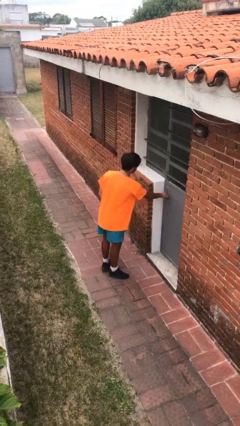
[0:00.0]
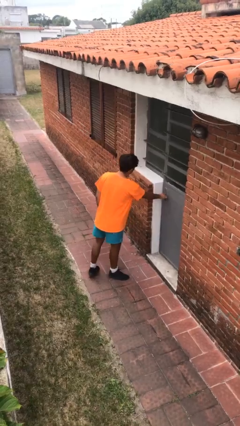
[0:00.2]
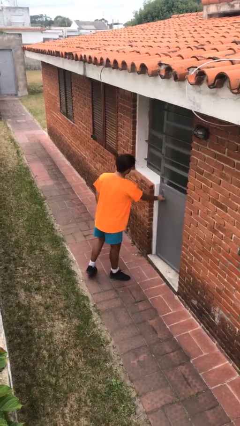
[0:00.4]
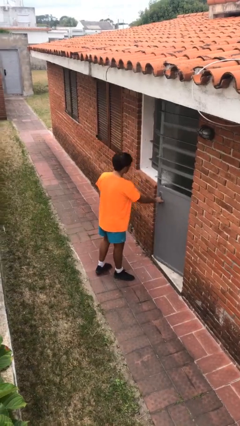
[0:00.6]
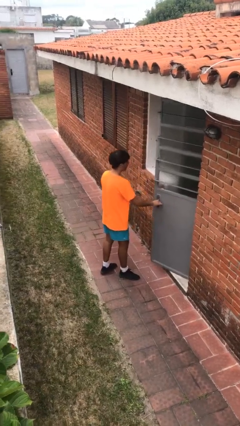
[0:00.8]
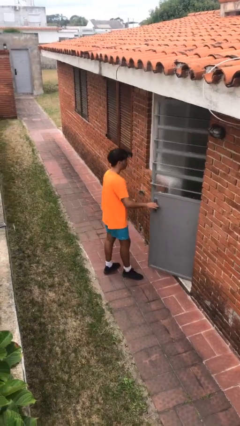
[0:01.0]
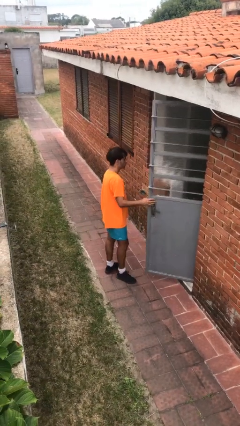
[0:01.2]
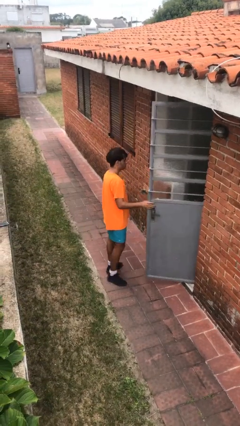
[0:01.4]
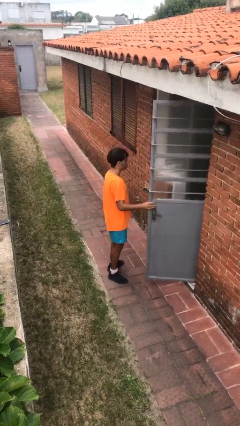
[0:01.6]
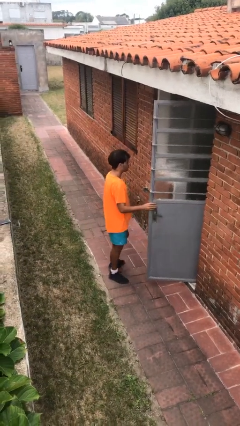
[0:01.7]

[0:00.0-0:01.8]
person opens facility door

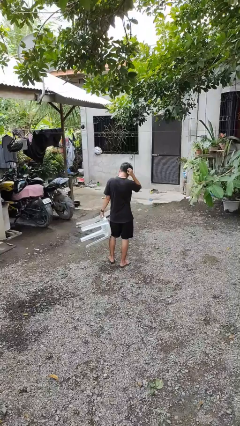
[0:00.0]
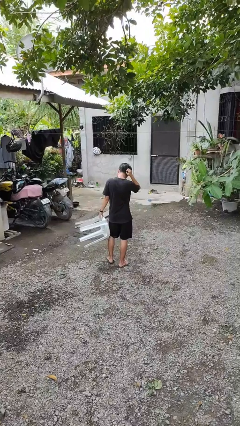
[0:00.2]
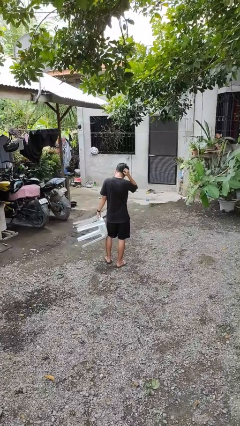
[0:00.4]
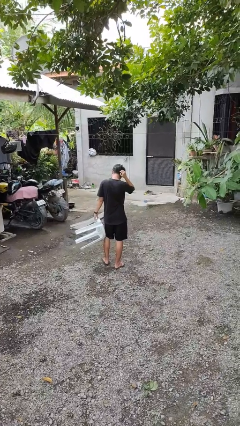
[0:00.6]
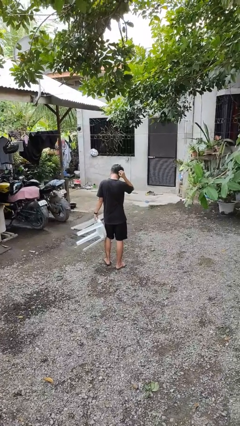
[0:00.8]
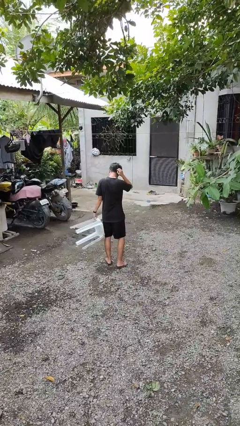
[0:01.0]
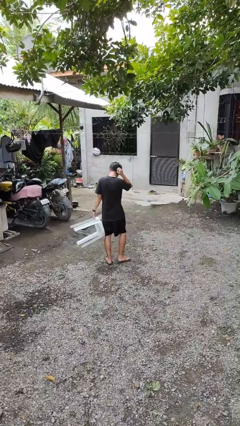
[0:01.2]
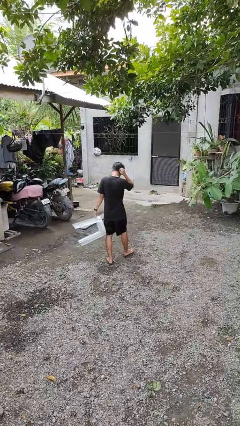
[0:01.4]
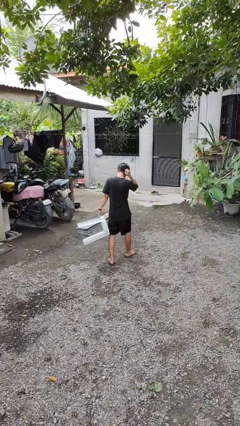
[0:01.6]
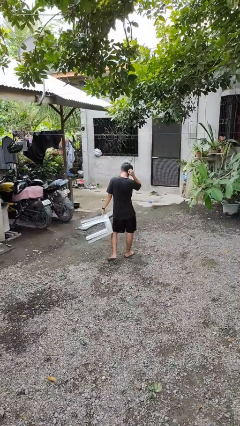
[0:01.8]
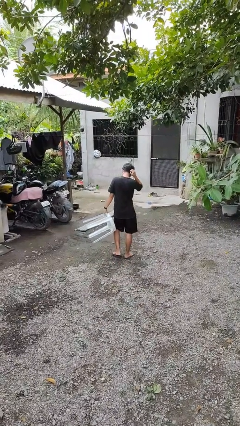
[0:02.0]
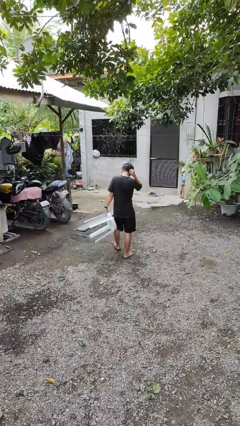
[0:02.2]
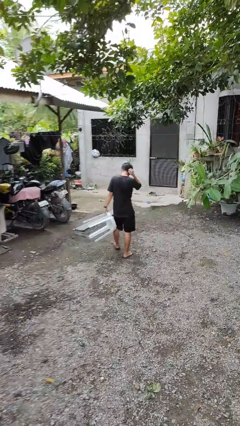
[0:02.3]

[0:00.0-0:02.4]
person carries furniture

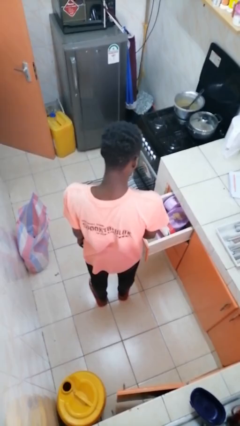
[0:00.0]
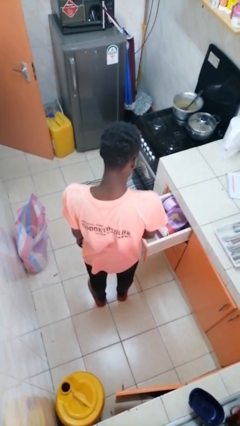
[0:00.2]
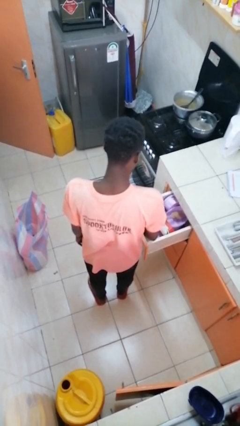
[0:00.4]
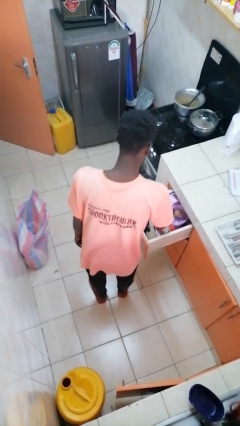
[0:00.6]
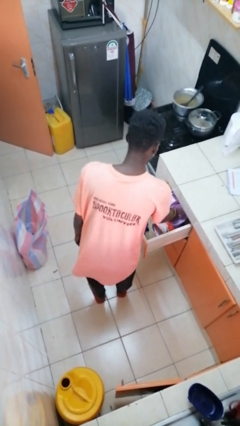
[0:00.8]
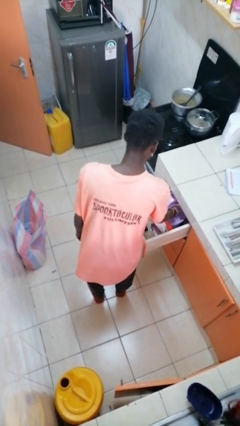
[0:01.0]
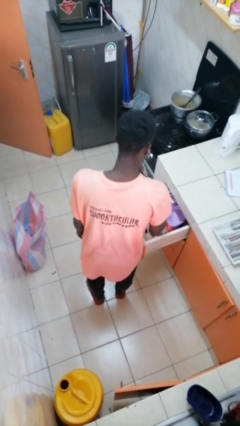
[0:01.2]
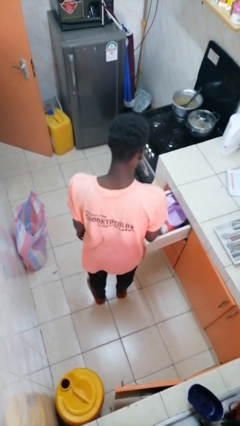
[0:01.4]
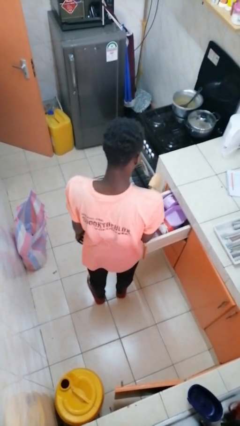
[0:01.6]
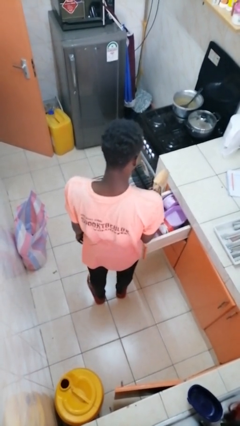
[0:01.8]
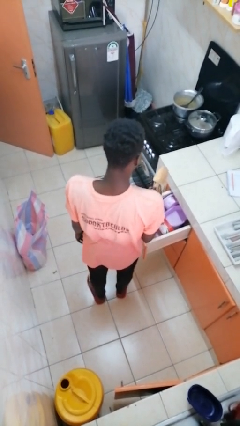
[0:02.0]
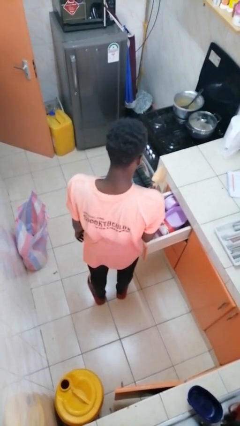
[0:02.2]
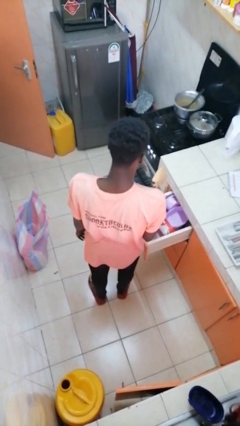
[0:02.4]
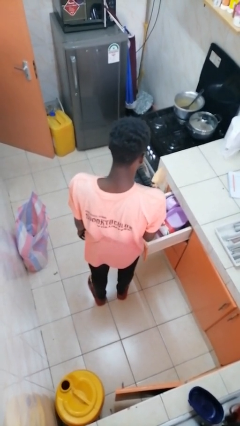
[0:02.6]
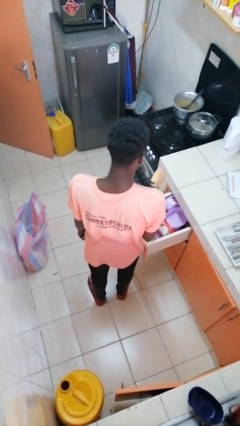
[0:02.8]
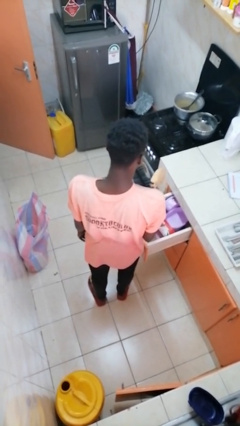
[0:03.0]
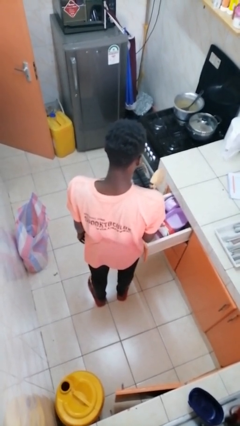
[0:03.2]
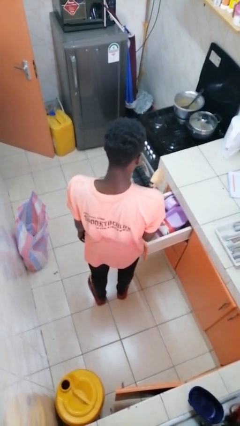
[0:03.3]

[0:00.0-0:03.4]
person takes object from kitchen drawer

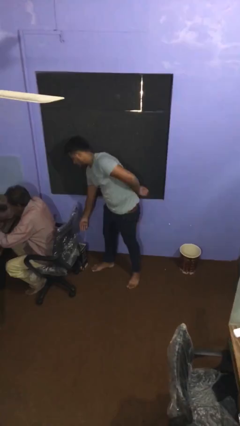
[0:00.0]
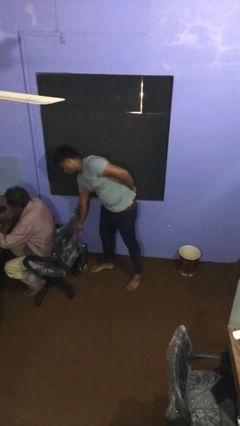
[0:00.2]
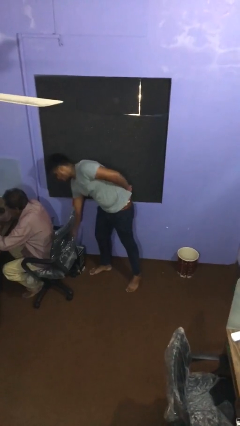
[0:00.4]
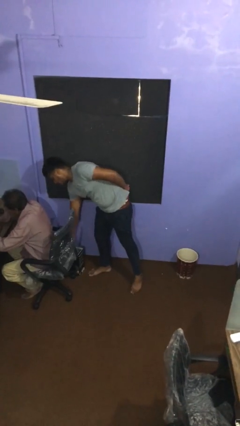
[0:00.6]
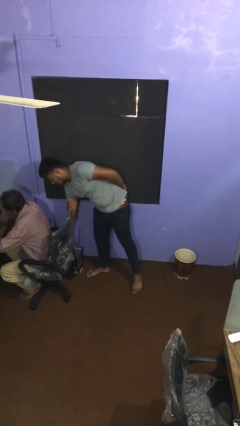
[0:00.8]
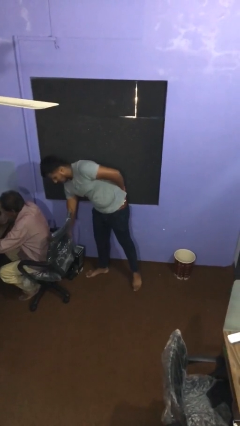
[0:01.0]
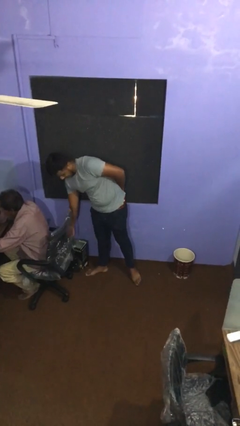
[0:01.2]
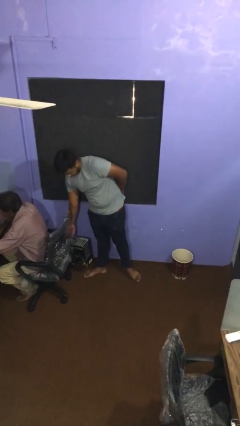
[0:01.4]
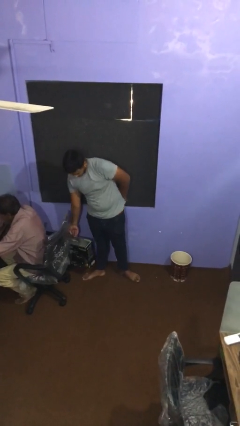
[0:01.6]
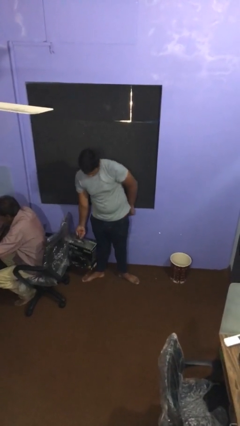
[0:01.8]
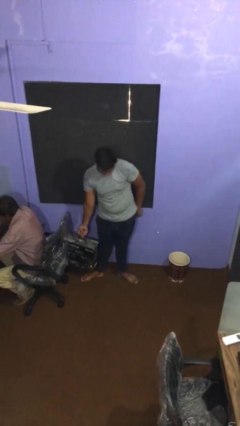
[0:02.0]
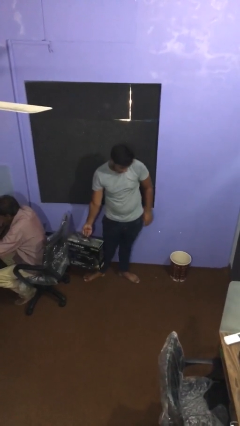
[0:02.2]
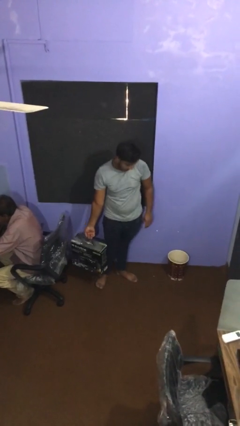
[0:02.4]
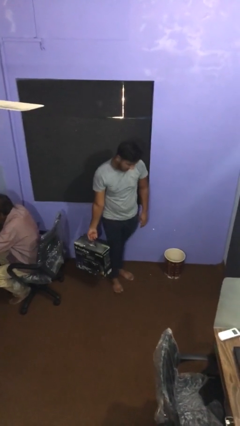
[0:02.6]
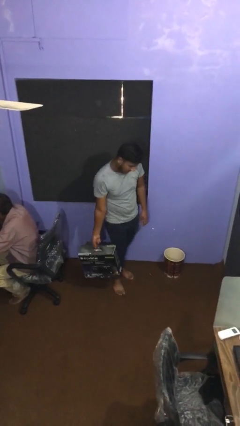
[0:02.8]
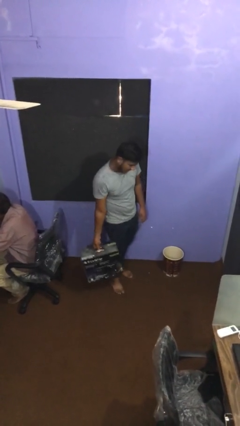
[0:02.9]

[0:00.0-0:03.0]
person steals object from person

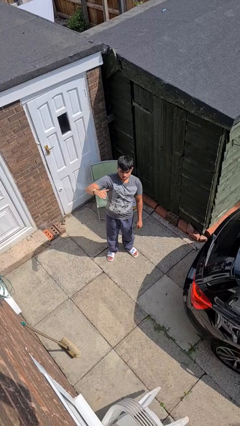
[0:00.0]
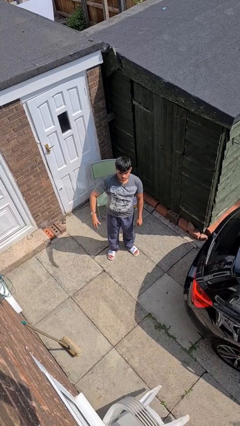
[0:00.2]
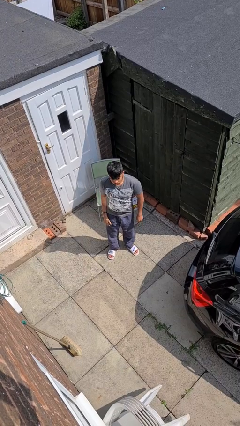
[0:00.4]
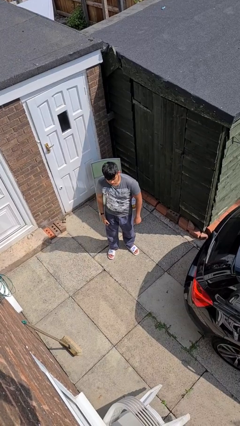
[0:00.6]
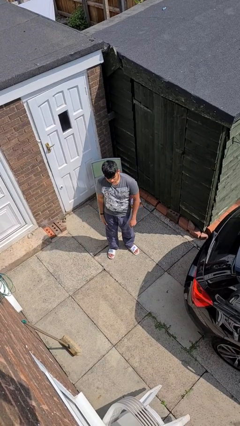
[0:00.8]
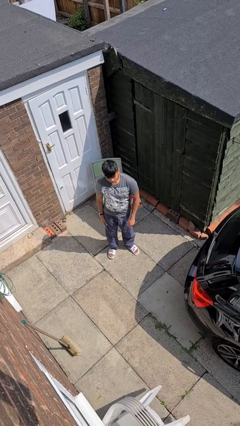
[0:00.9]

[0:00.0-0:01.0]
person gestures lower hand

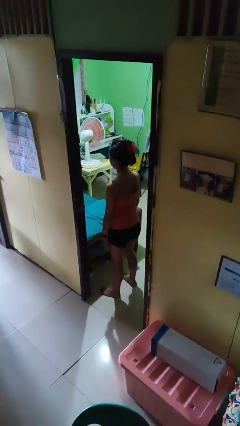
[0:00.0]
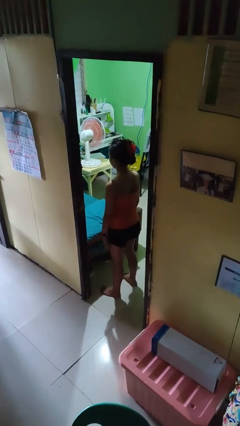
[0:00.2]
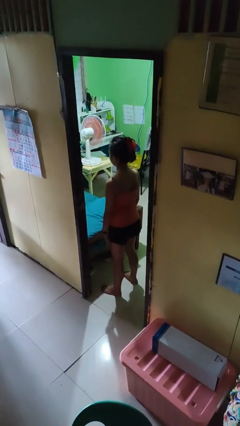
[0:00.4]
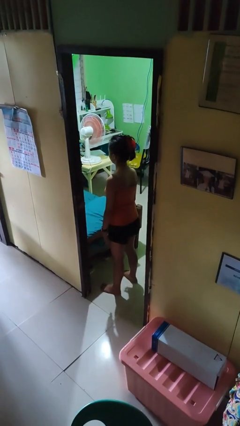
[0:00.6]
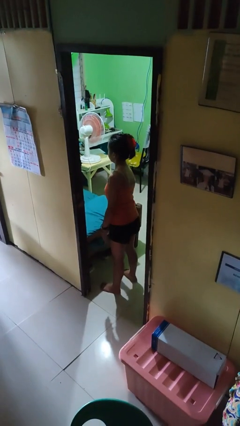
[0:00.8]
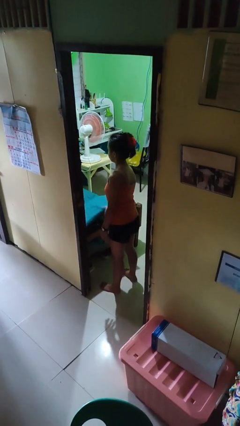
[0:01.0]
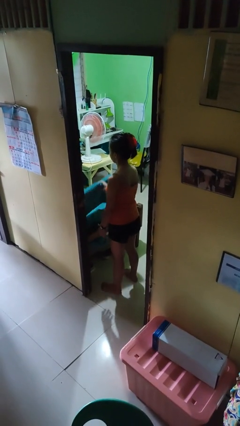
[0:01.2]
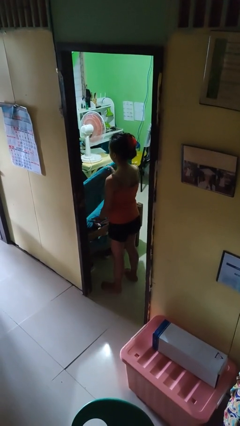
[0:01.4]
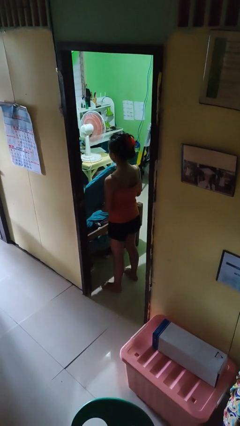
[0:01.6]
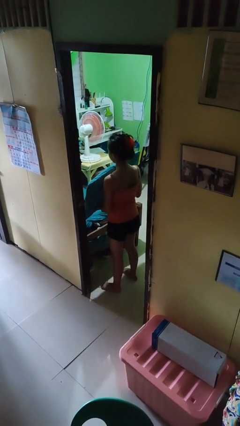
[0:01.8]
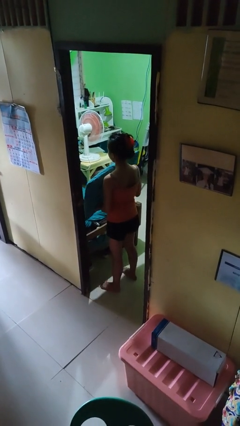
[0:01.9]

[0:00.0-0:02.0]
person picks up object from bed

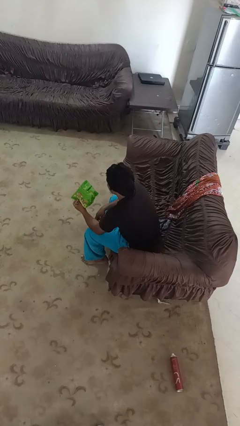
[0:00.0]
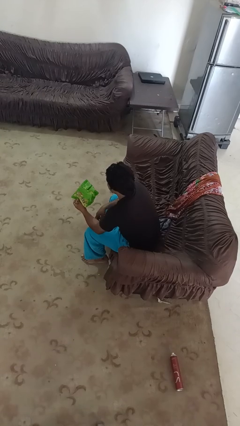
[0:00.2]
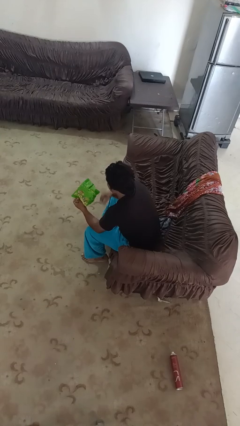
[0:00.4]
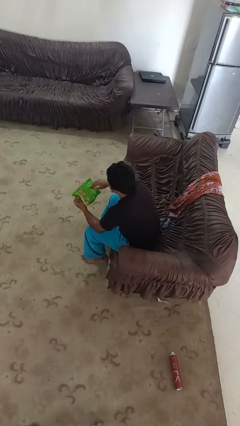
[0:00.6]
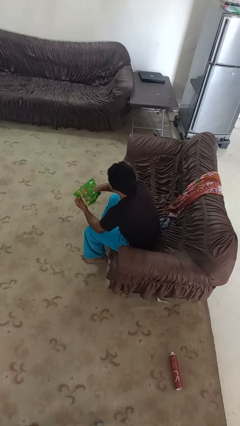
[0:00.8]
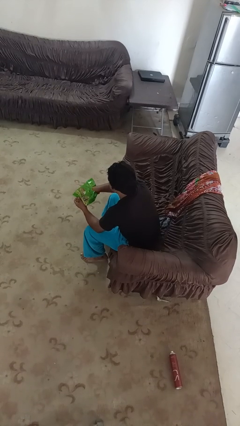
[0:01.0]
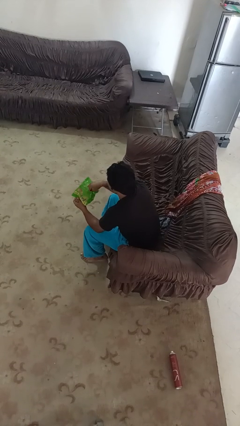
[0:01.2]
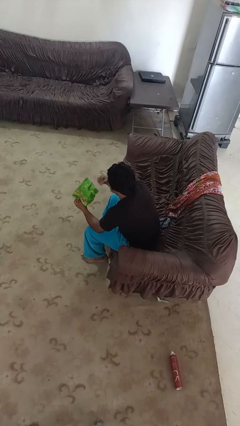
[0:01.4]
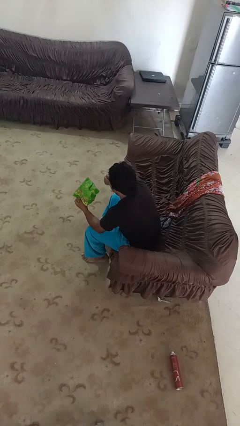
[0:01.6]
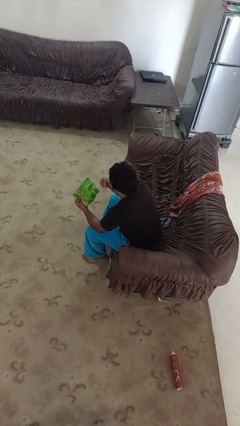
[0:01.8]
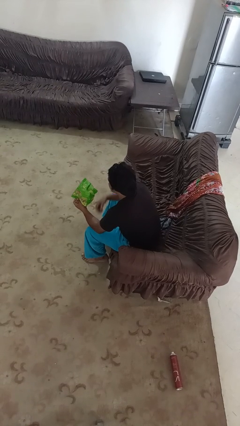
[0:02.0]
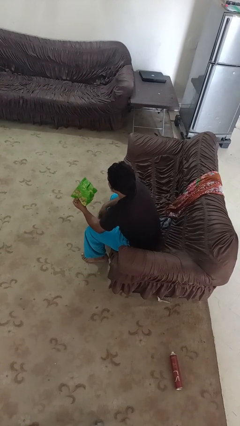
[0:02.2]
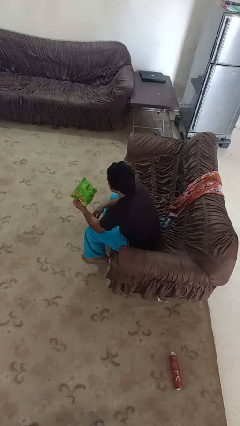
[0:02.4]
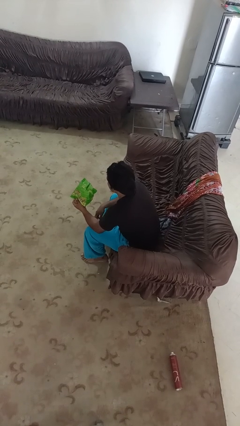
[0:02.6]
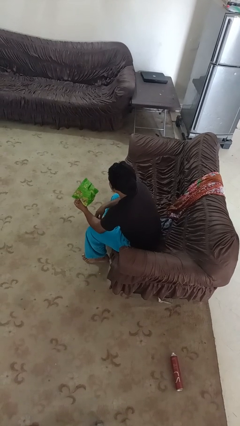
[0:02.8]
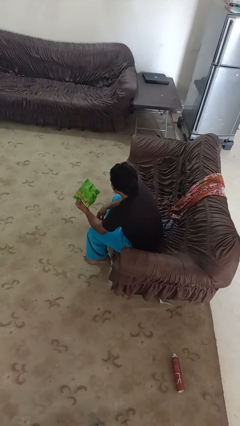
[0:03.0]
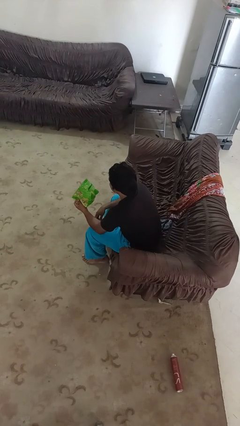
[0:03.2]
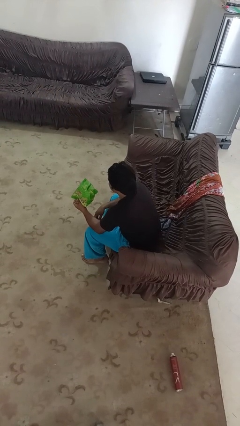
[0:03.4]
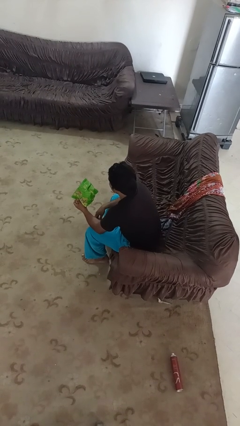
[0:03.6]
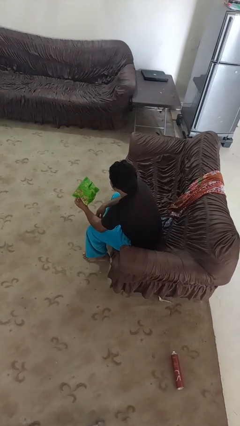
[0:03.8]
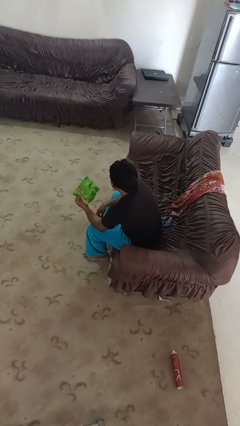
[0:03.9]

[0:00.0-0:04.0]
person eats snack from bag
